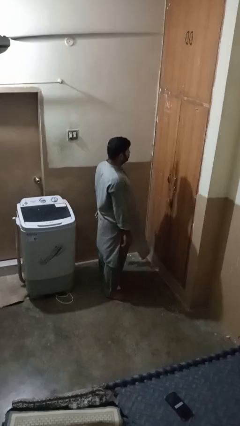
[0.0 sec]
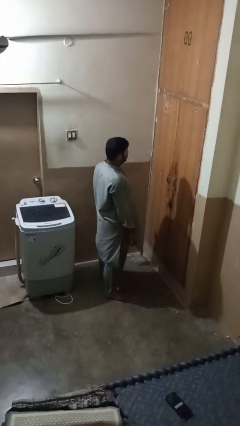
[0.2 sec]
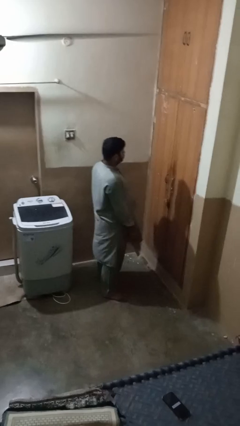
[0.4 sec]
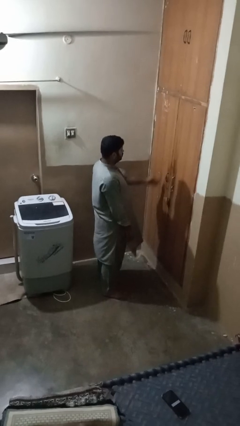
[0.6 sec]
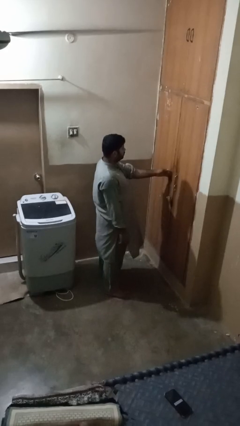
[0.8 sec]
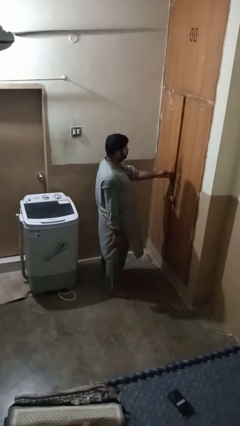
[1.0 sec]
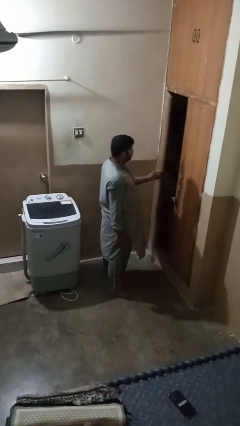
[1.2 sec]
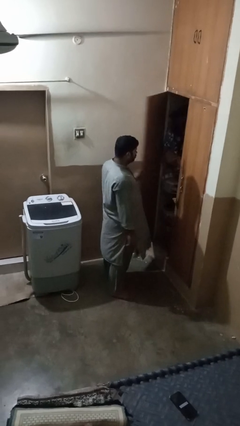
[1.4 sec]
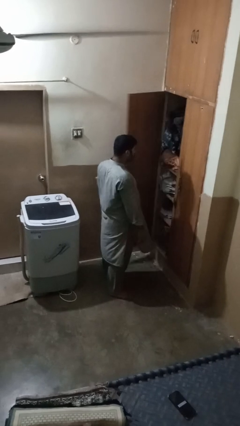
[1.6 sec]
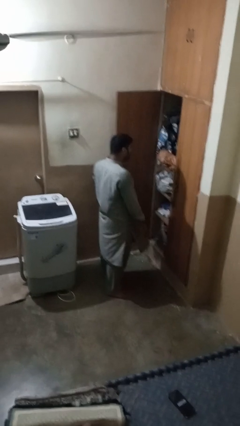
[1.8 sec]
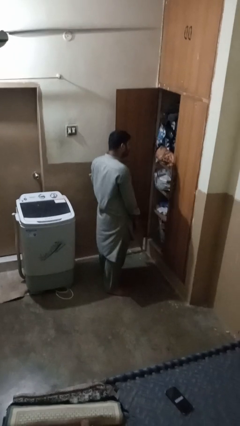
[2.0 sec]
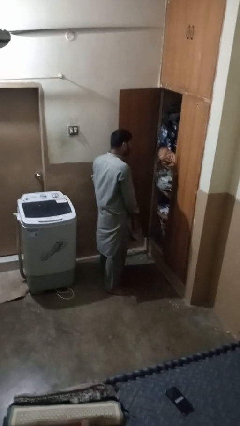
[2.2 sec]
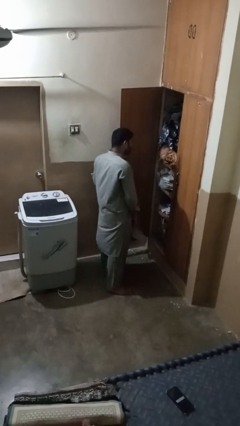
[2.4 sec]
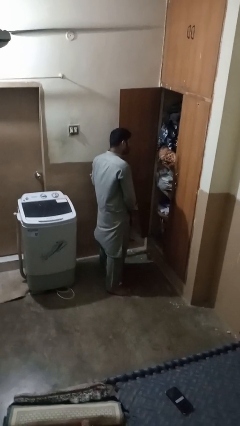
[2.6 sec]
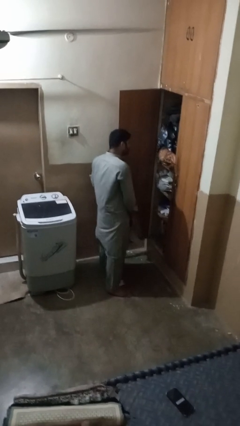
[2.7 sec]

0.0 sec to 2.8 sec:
person opens closet door

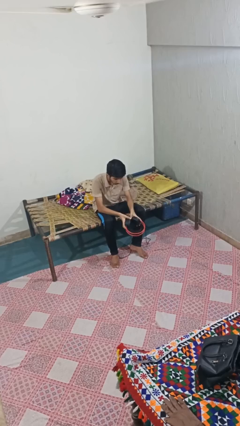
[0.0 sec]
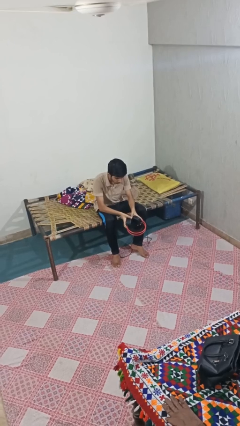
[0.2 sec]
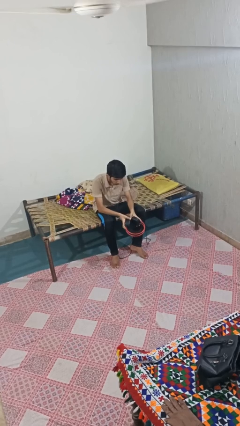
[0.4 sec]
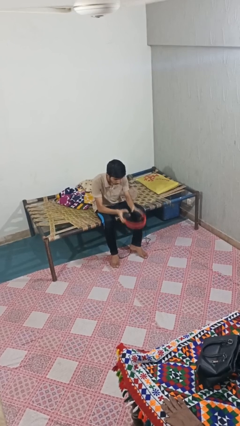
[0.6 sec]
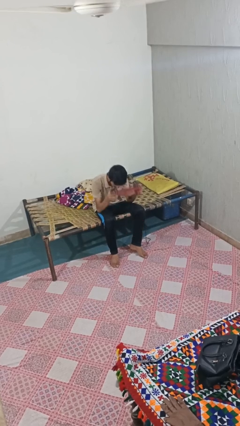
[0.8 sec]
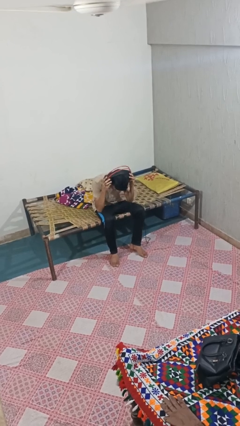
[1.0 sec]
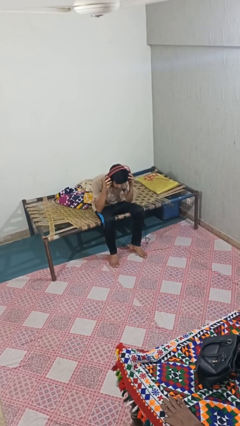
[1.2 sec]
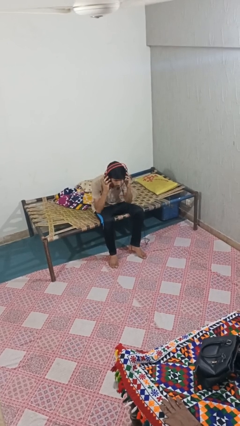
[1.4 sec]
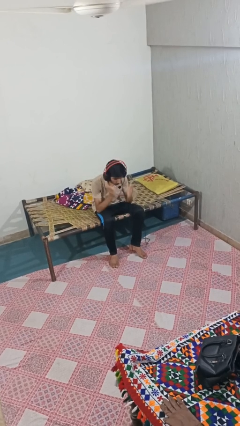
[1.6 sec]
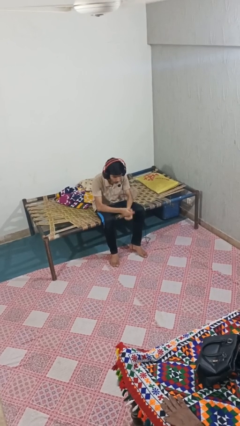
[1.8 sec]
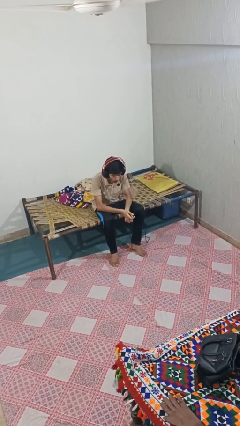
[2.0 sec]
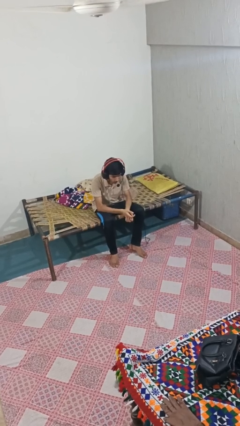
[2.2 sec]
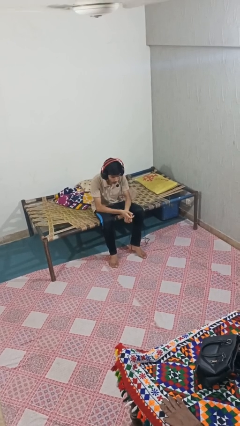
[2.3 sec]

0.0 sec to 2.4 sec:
person puts on headphones

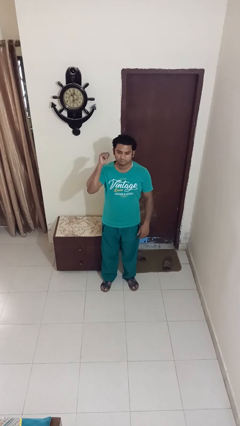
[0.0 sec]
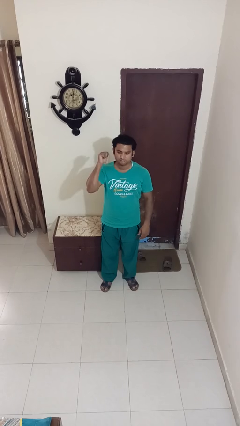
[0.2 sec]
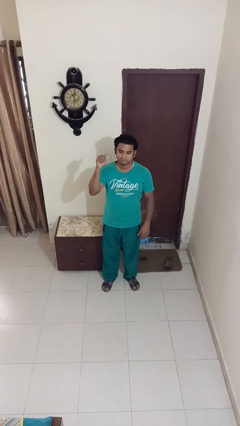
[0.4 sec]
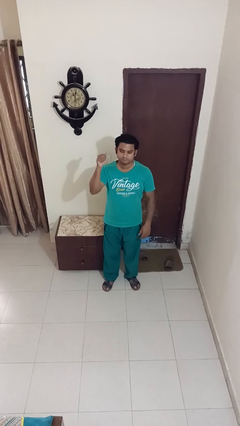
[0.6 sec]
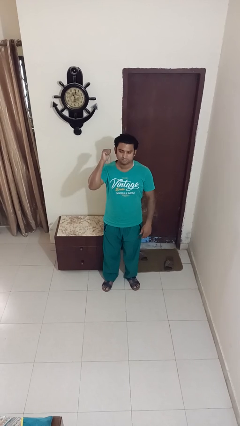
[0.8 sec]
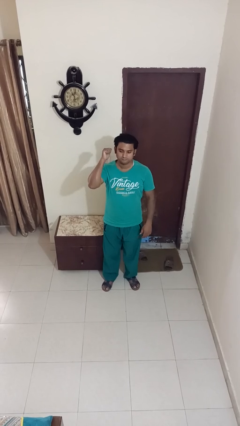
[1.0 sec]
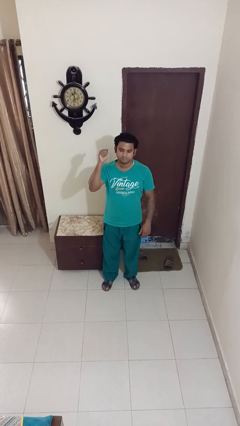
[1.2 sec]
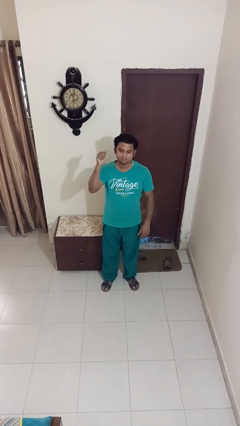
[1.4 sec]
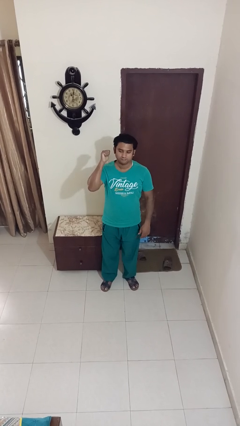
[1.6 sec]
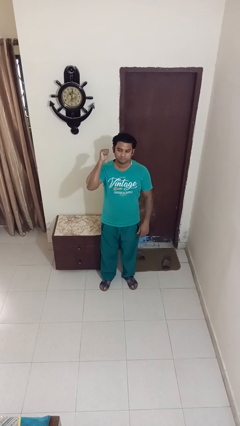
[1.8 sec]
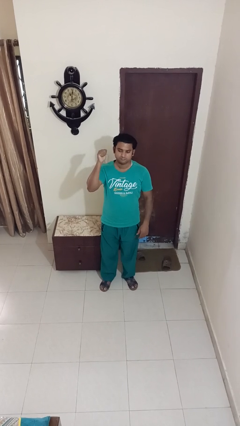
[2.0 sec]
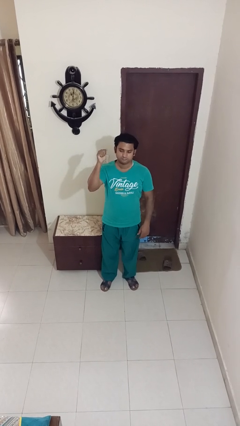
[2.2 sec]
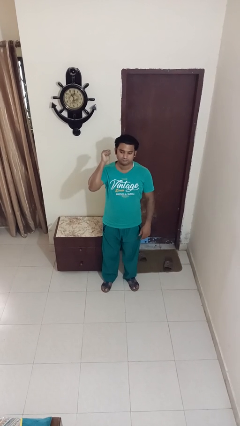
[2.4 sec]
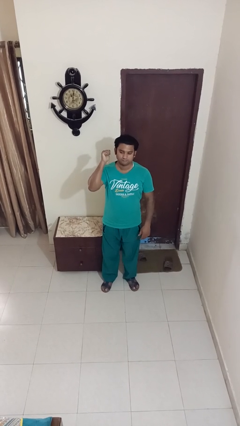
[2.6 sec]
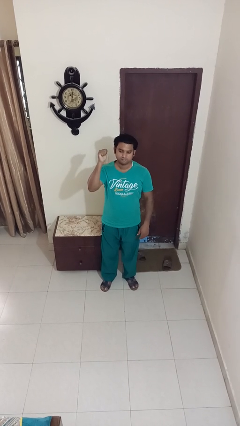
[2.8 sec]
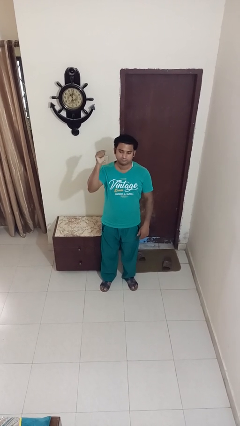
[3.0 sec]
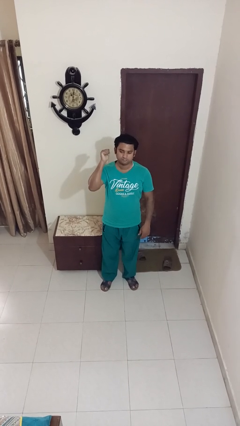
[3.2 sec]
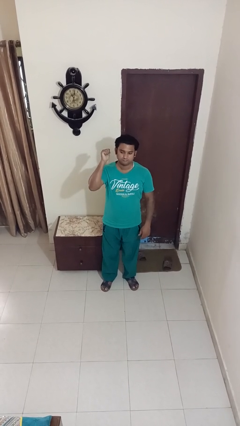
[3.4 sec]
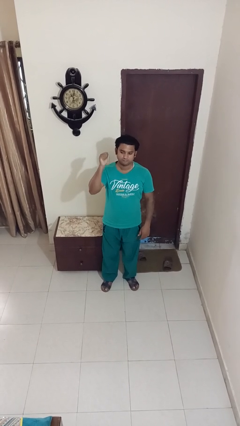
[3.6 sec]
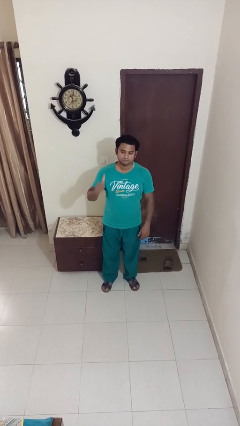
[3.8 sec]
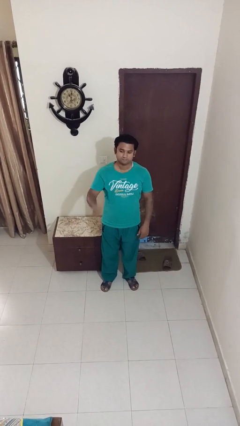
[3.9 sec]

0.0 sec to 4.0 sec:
person gestures behind me

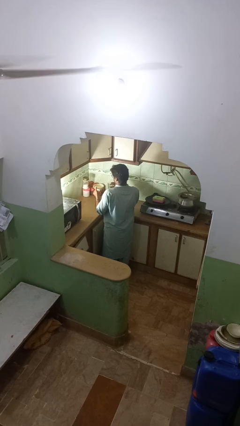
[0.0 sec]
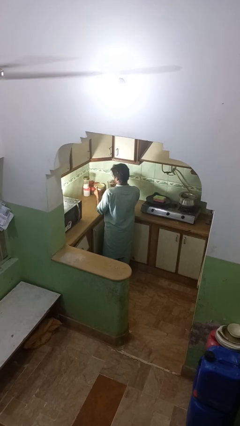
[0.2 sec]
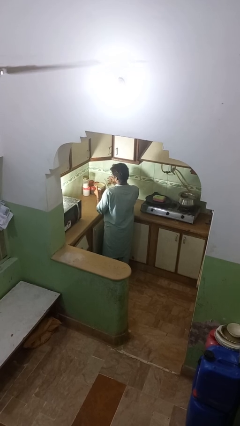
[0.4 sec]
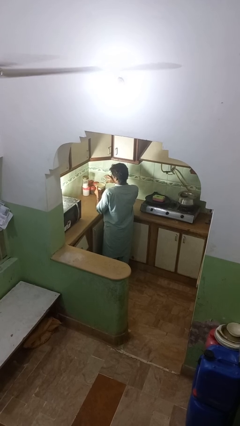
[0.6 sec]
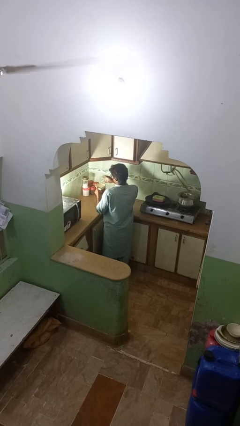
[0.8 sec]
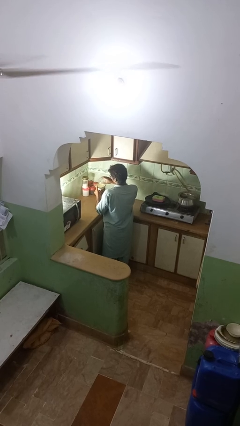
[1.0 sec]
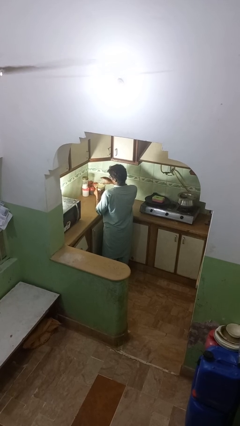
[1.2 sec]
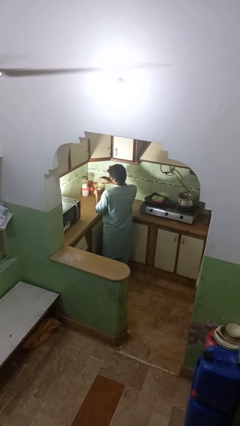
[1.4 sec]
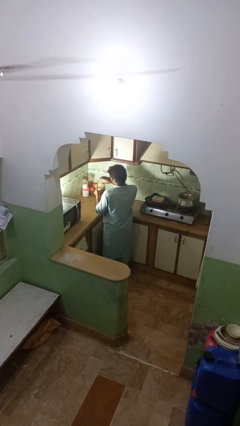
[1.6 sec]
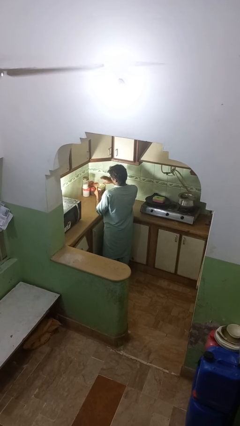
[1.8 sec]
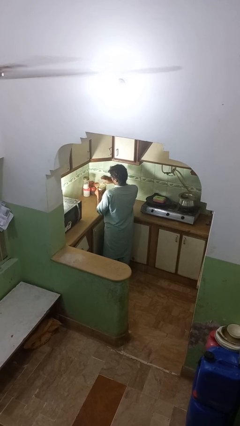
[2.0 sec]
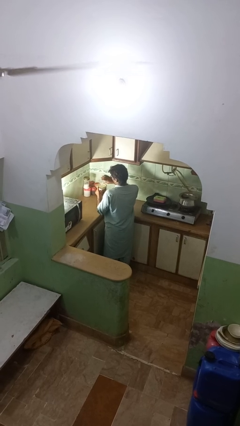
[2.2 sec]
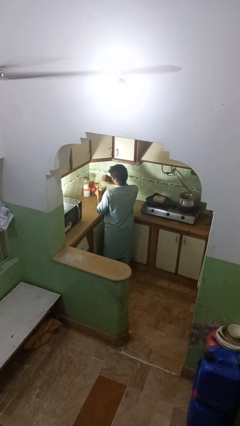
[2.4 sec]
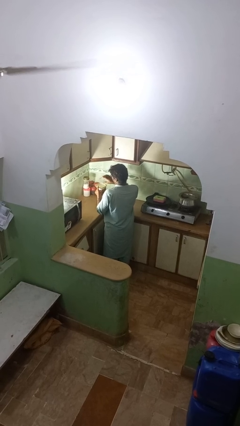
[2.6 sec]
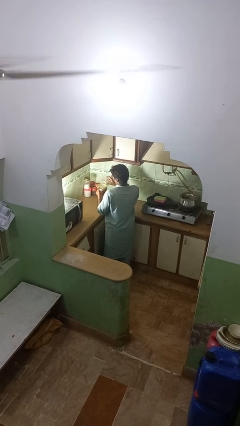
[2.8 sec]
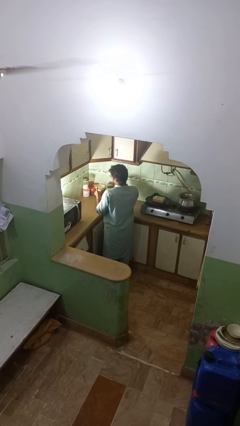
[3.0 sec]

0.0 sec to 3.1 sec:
person pours into bowl

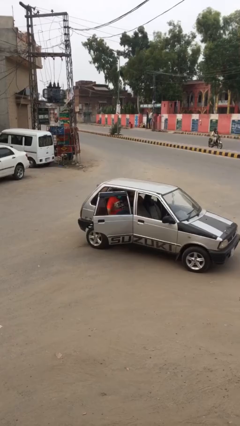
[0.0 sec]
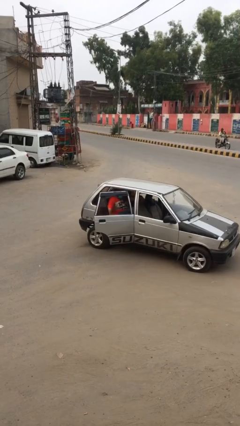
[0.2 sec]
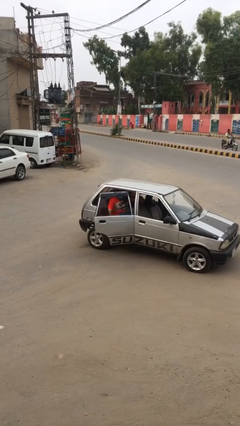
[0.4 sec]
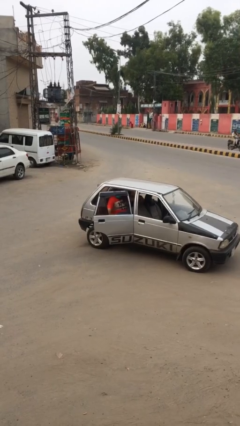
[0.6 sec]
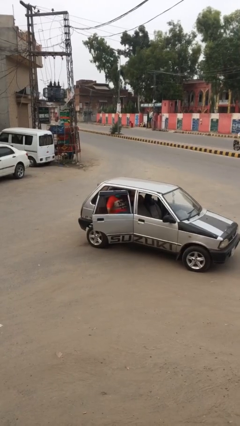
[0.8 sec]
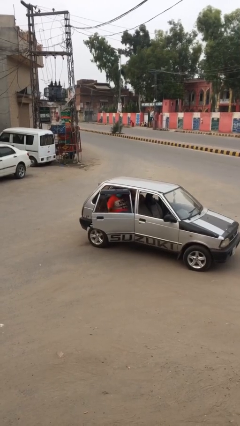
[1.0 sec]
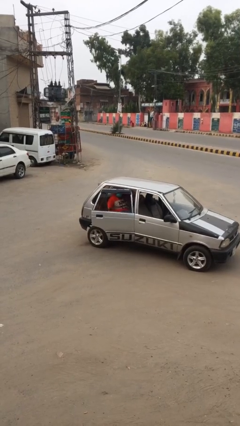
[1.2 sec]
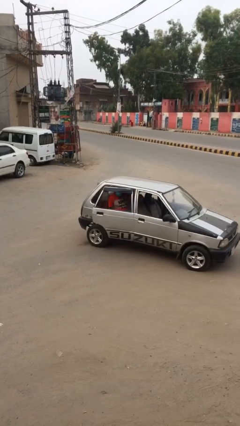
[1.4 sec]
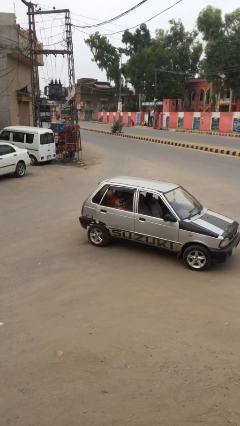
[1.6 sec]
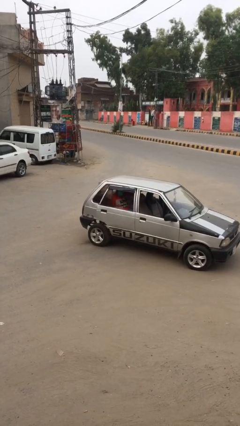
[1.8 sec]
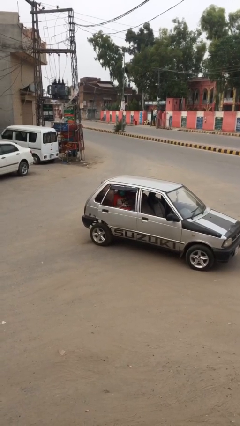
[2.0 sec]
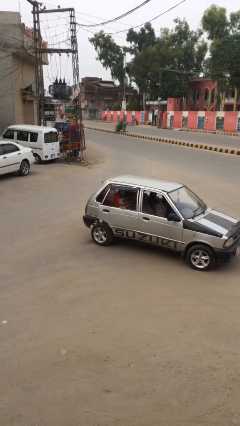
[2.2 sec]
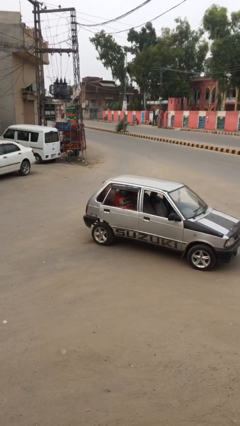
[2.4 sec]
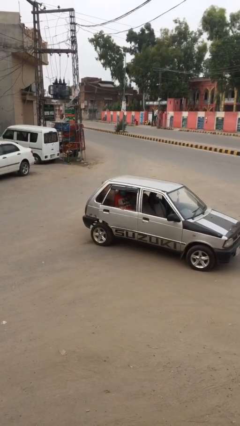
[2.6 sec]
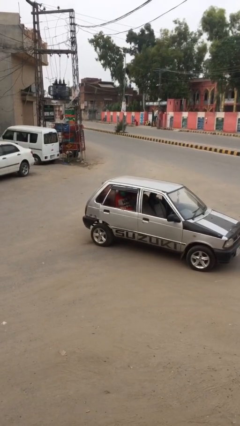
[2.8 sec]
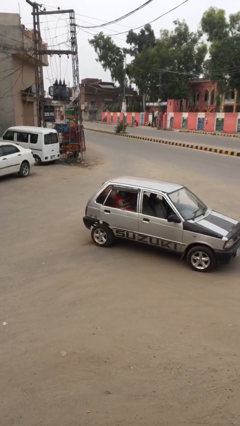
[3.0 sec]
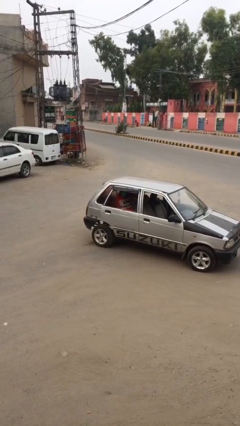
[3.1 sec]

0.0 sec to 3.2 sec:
person closes car door

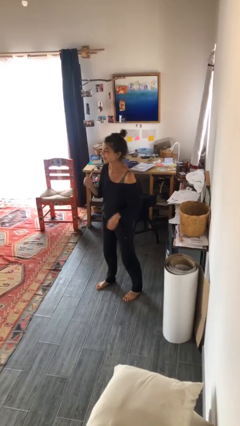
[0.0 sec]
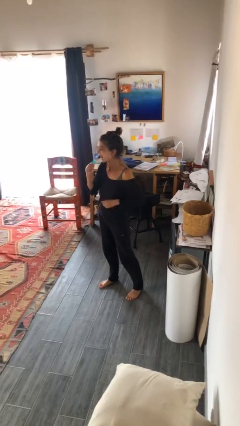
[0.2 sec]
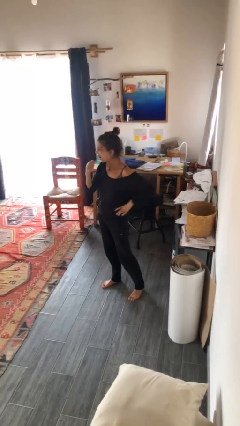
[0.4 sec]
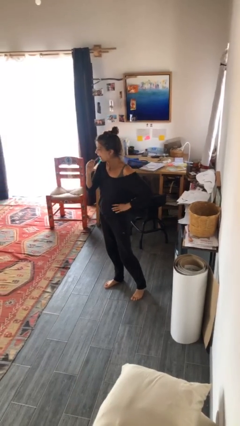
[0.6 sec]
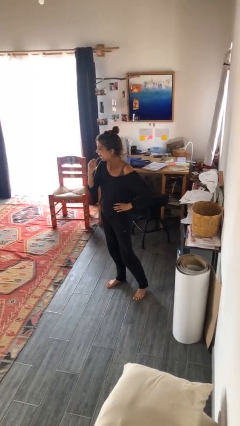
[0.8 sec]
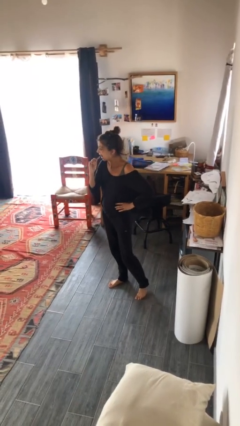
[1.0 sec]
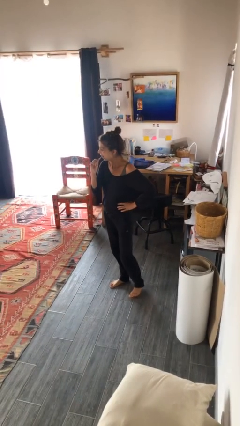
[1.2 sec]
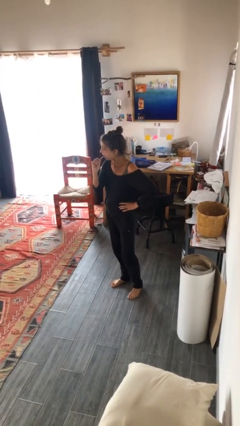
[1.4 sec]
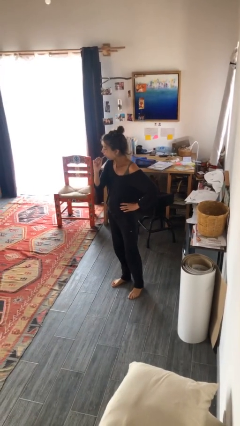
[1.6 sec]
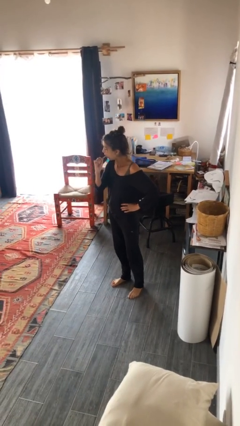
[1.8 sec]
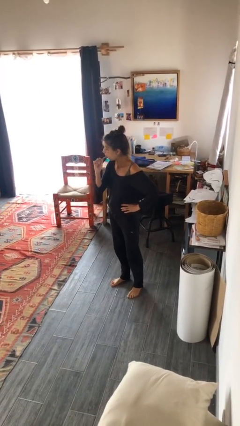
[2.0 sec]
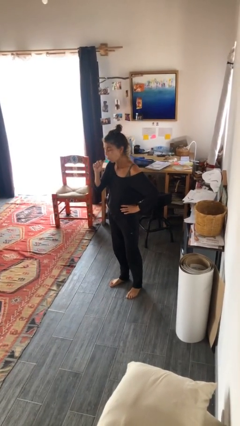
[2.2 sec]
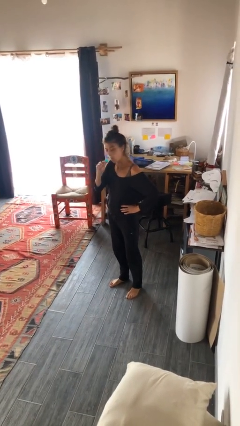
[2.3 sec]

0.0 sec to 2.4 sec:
person brushes teeth
